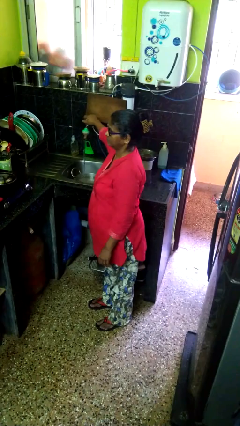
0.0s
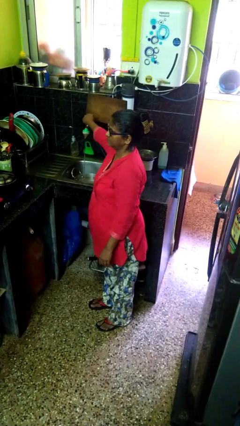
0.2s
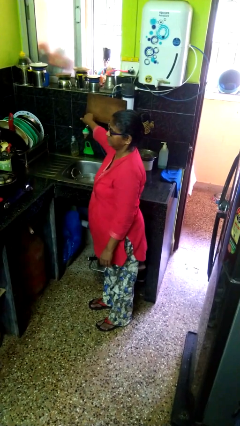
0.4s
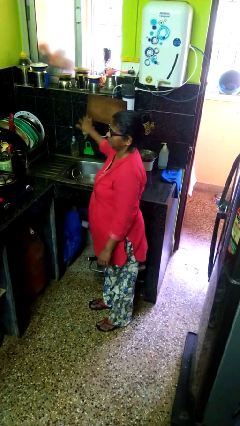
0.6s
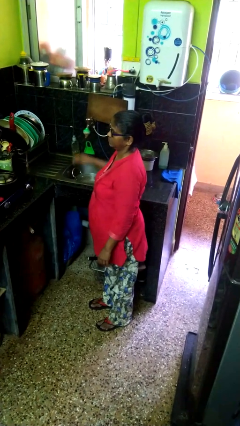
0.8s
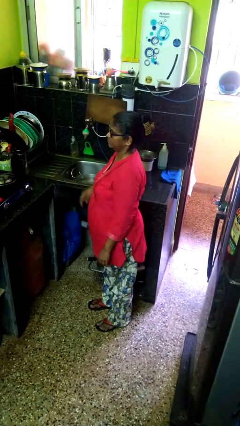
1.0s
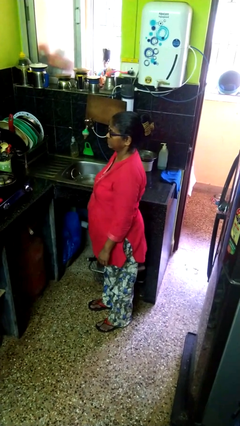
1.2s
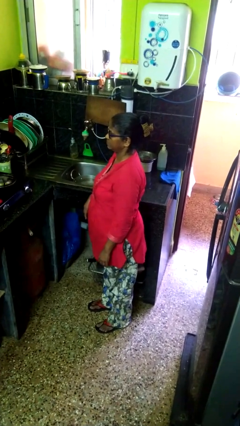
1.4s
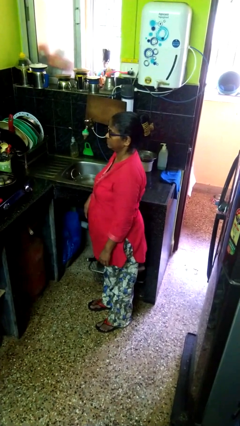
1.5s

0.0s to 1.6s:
person turns off faucet

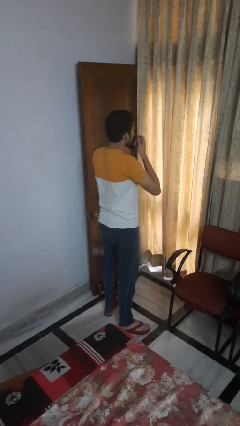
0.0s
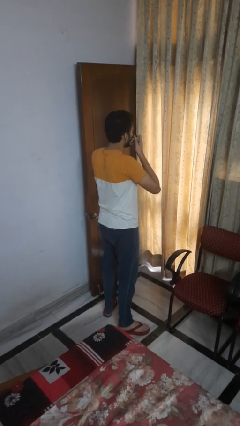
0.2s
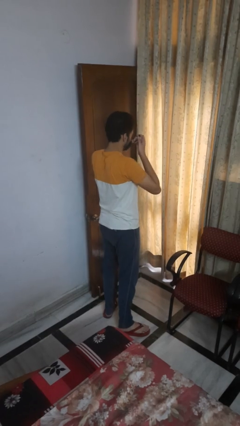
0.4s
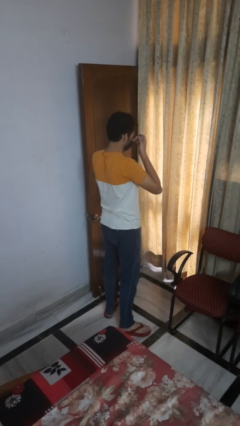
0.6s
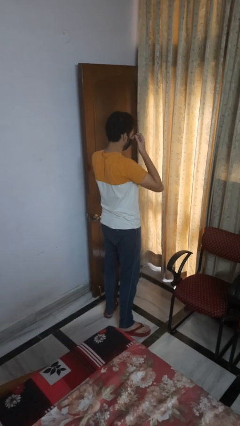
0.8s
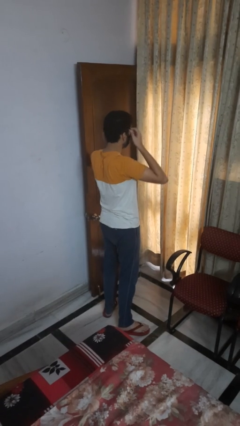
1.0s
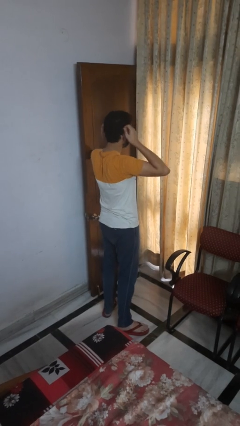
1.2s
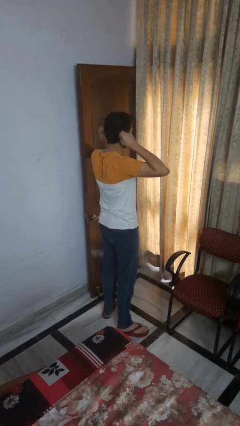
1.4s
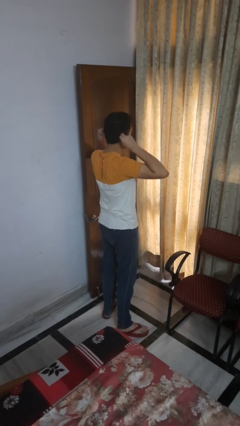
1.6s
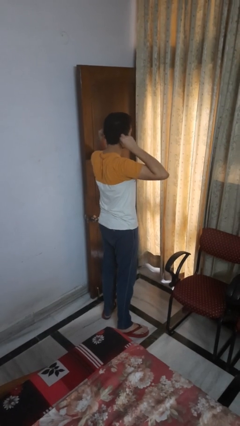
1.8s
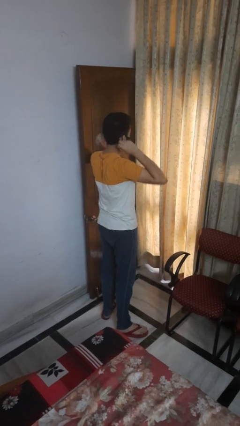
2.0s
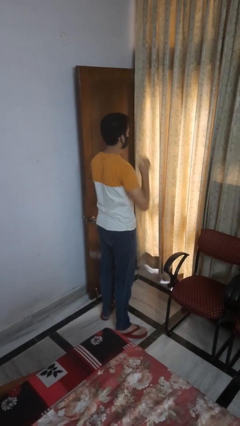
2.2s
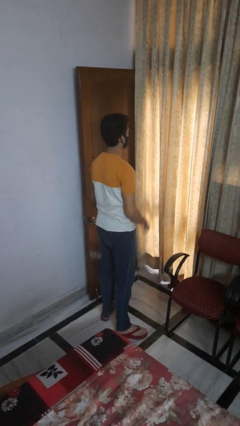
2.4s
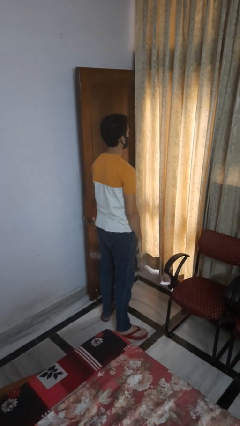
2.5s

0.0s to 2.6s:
person puts on facemask

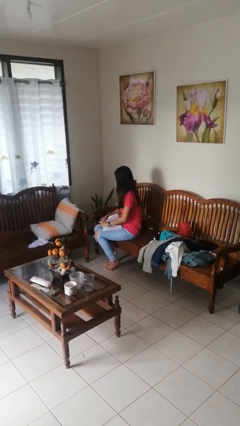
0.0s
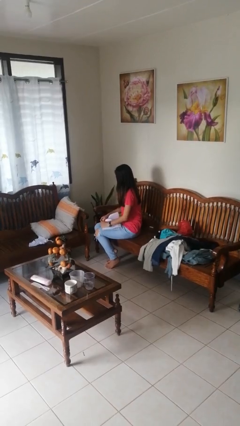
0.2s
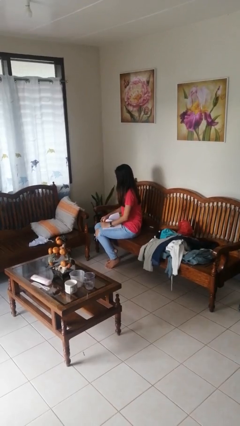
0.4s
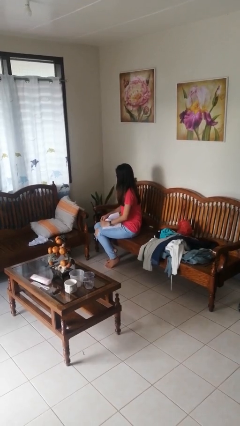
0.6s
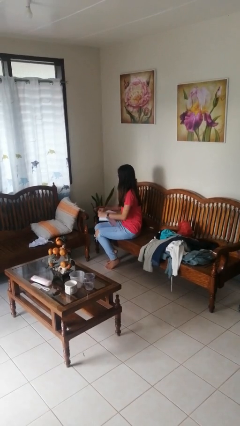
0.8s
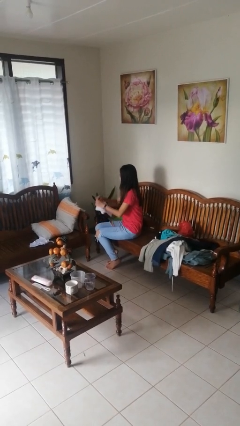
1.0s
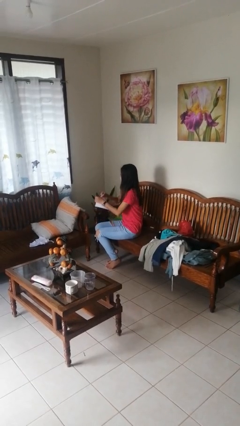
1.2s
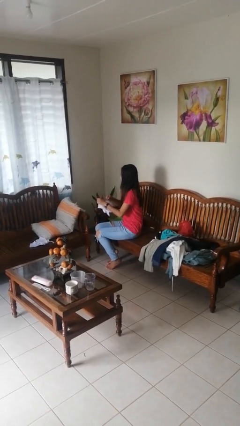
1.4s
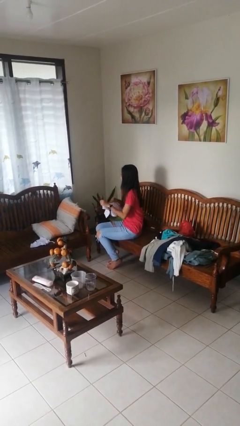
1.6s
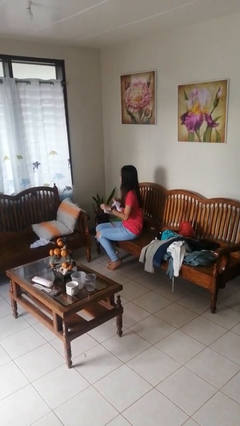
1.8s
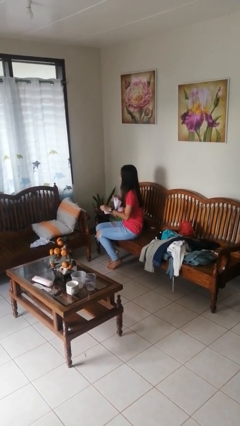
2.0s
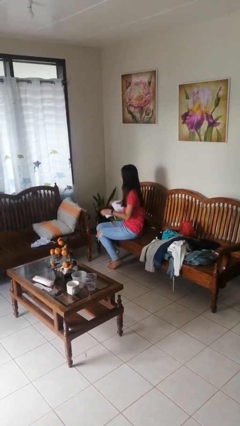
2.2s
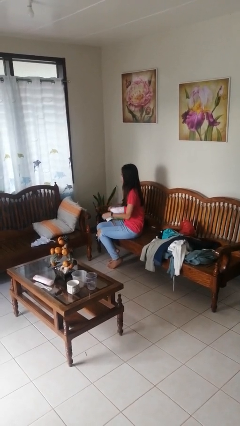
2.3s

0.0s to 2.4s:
person tears paper

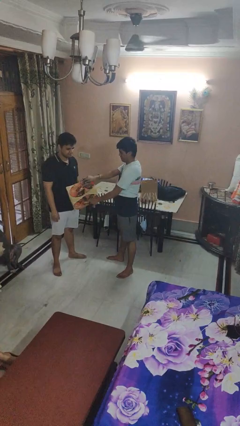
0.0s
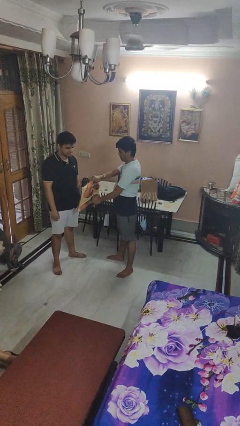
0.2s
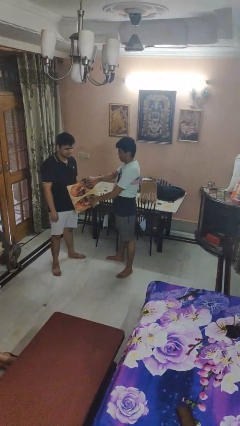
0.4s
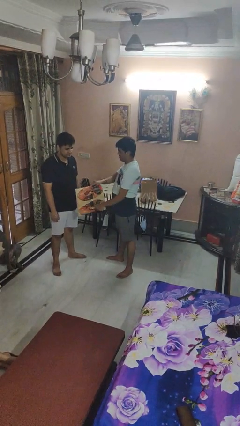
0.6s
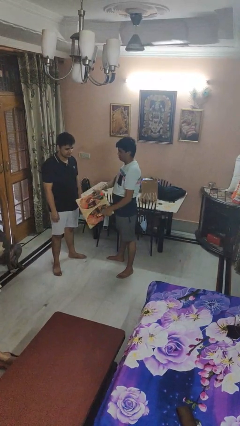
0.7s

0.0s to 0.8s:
person hits person with pillow

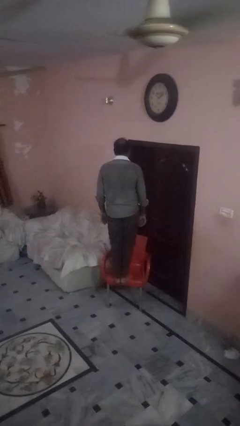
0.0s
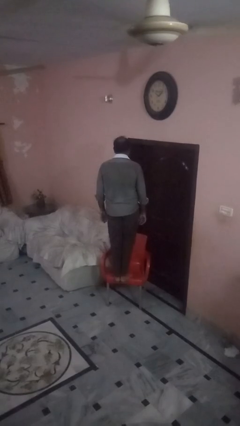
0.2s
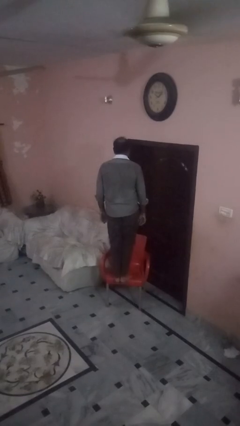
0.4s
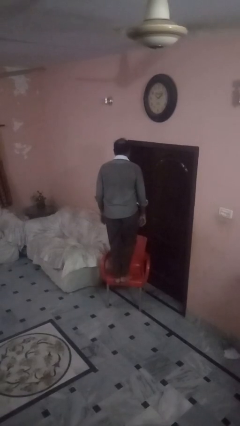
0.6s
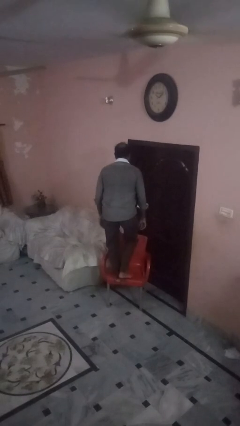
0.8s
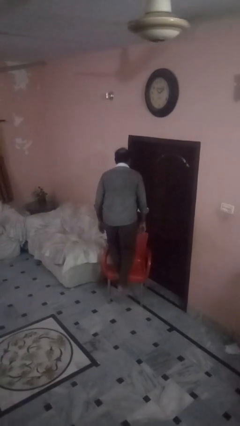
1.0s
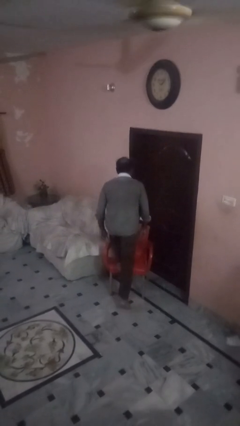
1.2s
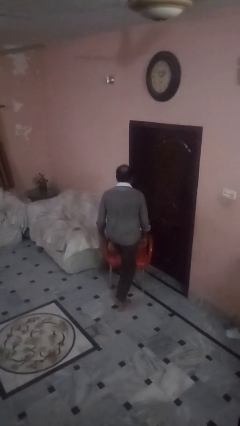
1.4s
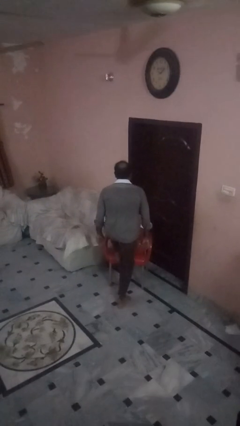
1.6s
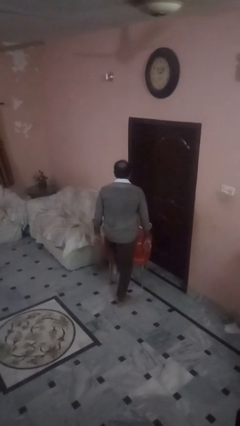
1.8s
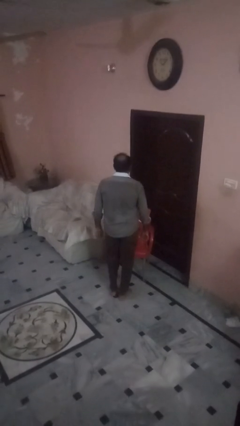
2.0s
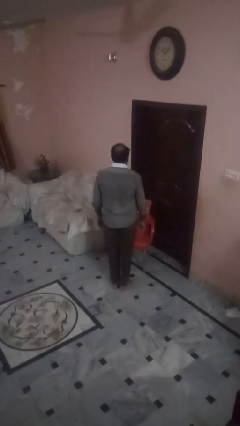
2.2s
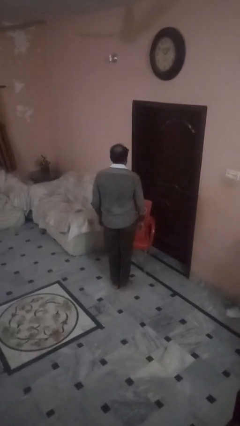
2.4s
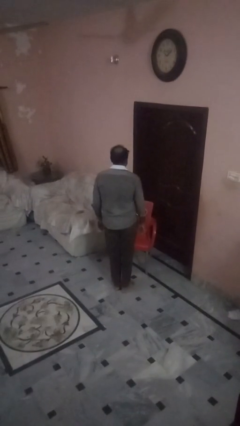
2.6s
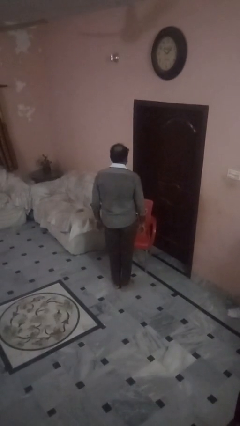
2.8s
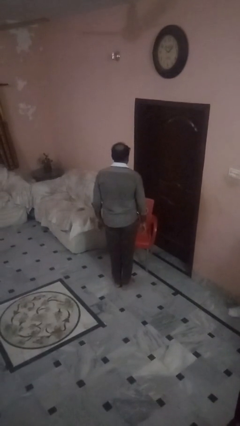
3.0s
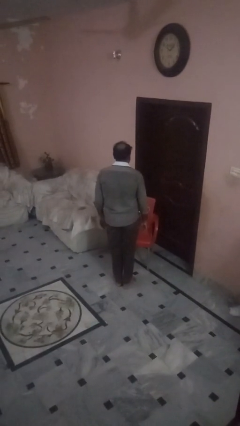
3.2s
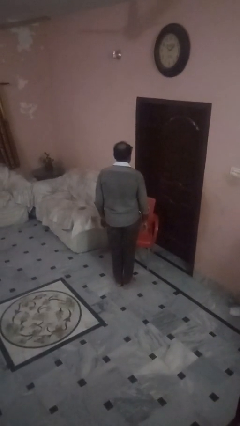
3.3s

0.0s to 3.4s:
person climbs off chair

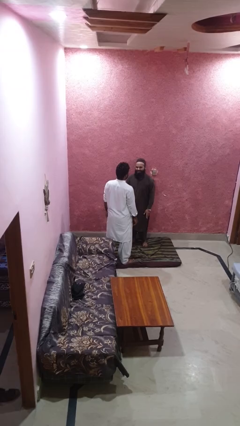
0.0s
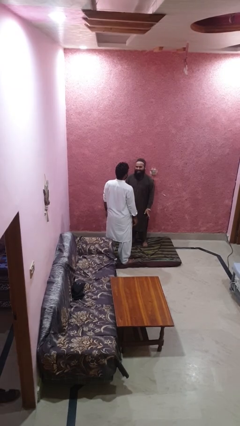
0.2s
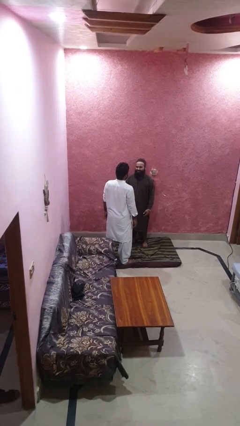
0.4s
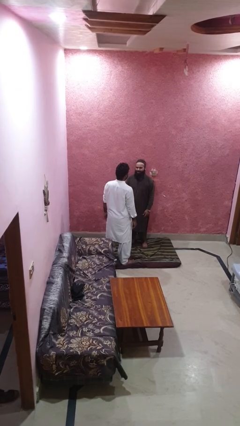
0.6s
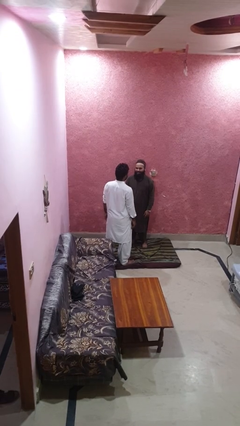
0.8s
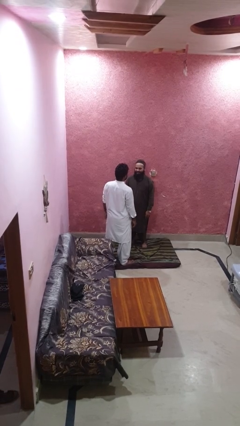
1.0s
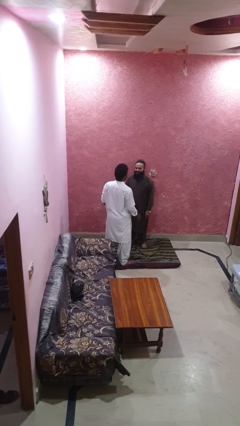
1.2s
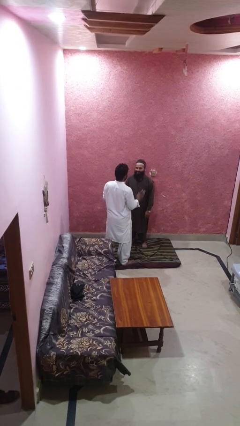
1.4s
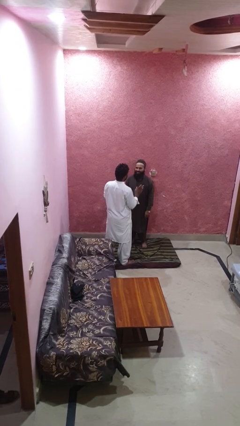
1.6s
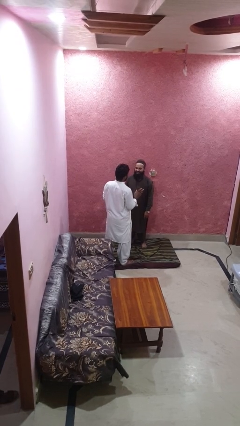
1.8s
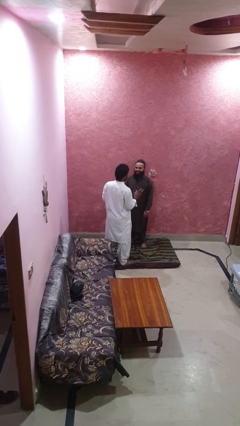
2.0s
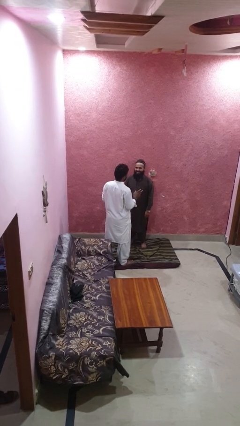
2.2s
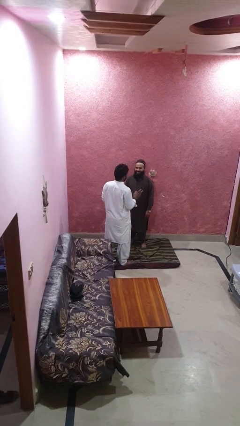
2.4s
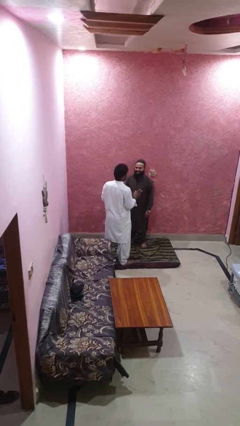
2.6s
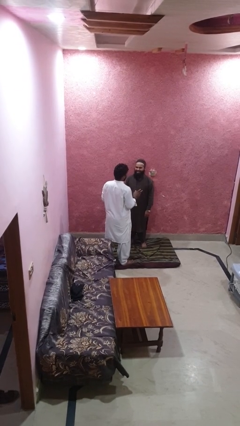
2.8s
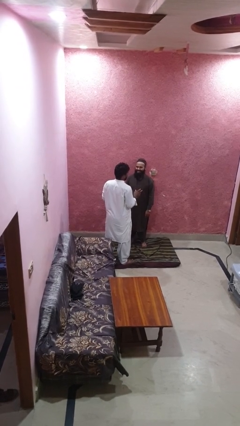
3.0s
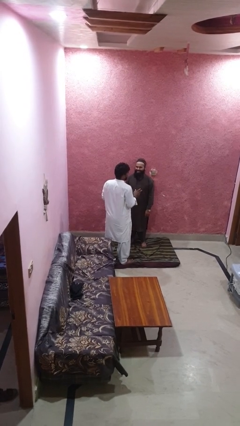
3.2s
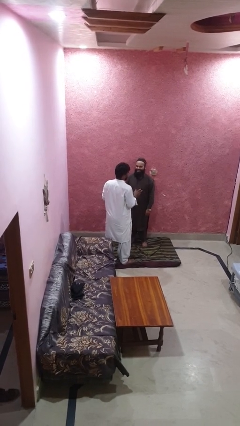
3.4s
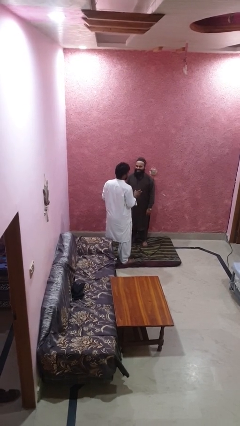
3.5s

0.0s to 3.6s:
person laughs with person

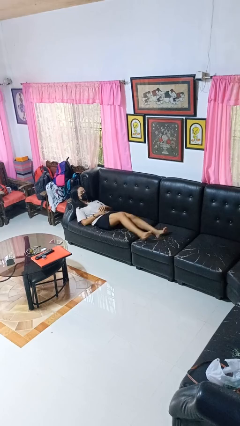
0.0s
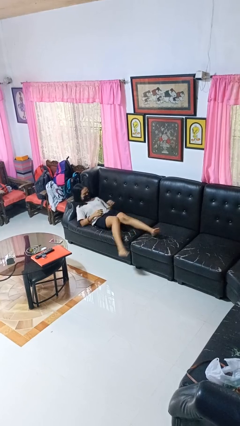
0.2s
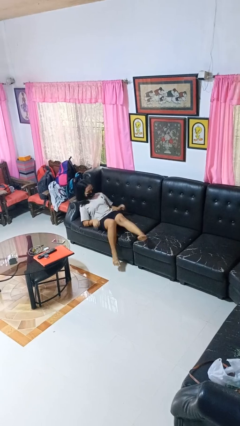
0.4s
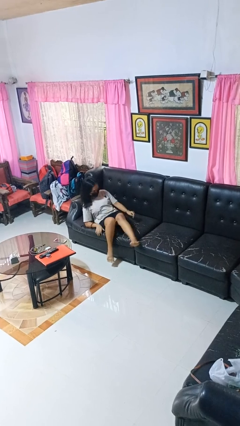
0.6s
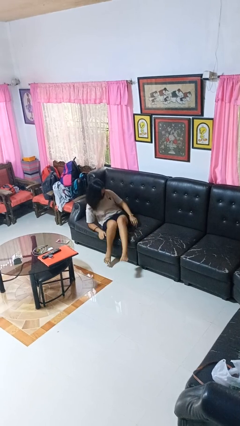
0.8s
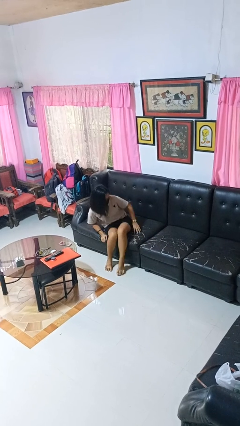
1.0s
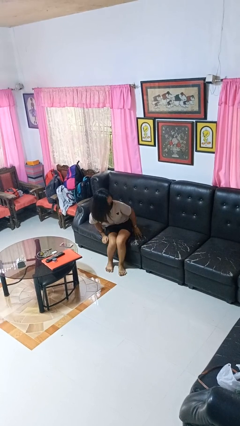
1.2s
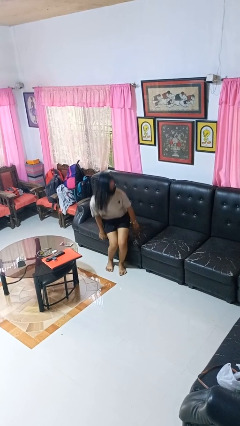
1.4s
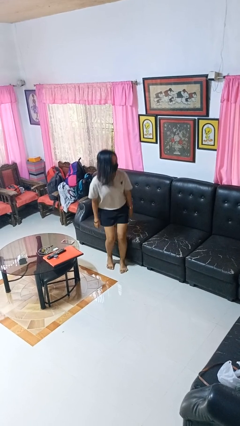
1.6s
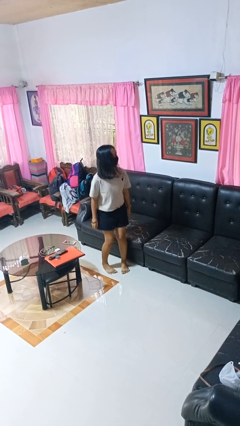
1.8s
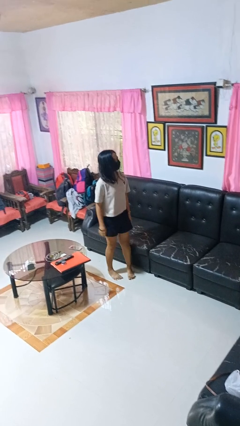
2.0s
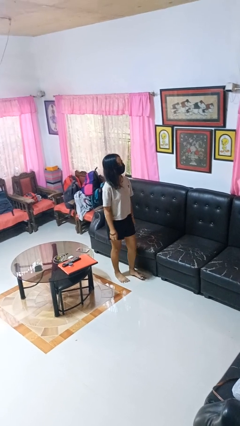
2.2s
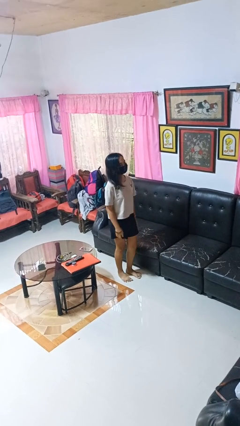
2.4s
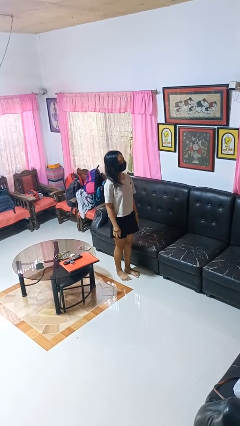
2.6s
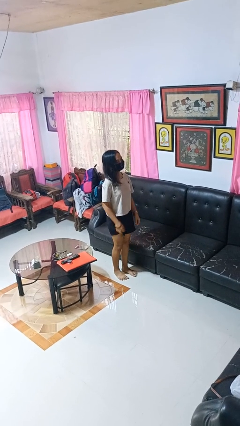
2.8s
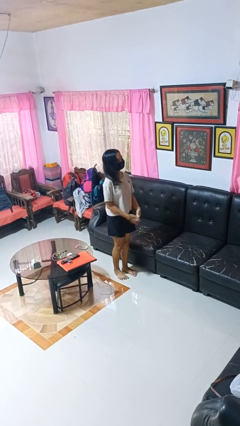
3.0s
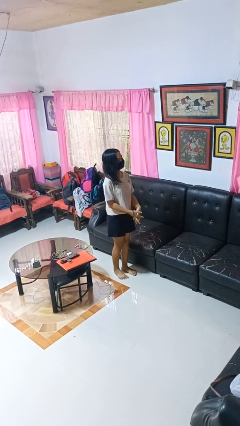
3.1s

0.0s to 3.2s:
person stands up
